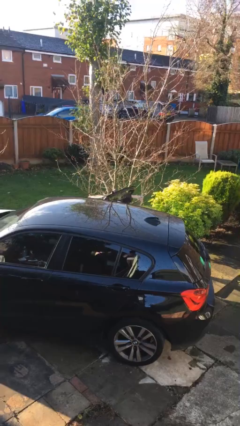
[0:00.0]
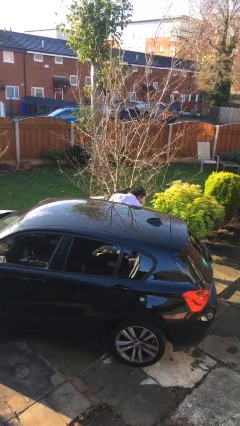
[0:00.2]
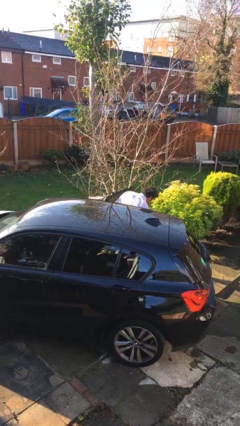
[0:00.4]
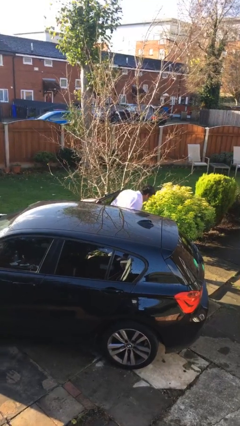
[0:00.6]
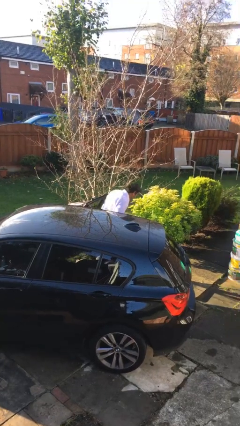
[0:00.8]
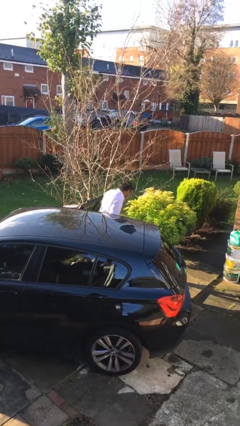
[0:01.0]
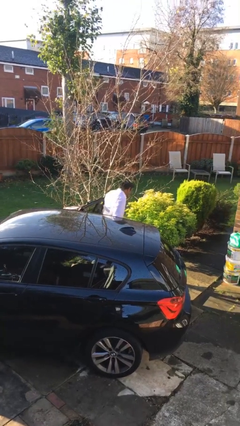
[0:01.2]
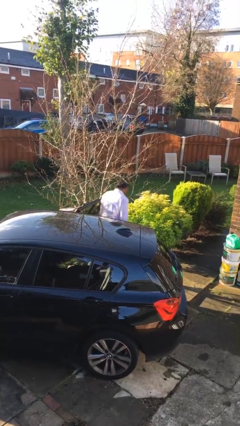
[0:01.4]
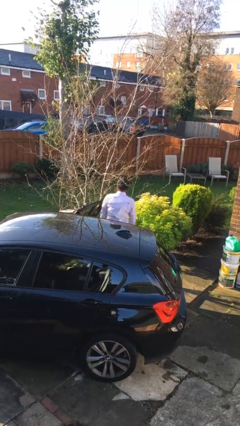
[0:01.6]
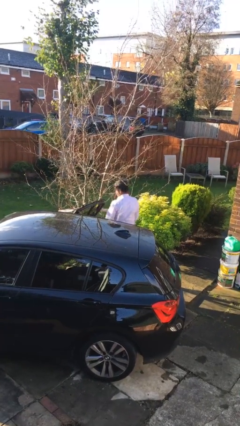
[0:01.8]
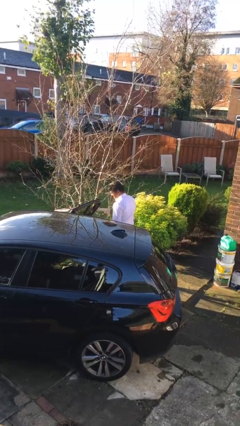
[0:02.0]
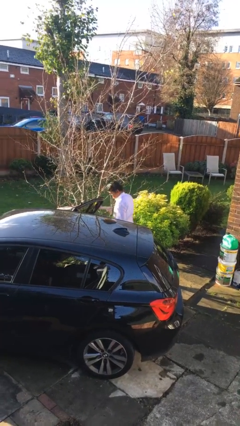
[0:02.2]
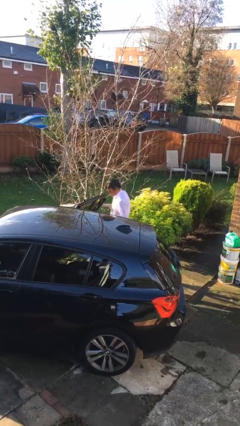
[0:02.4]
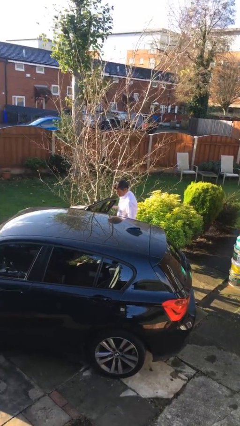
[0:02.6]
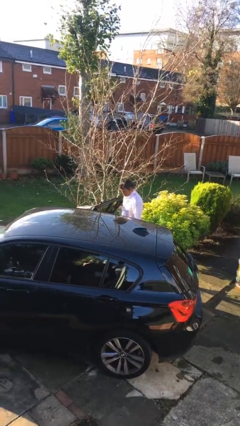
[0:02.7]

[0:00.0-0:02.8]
person exits car

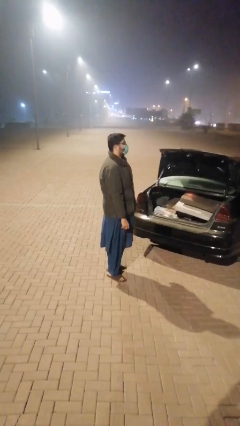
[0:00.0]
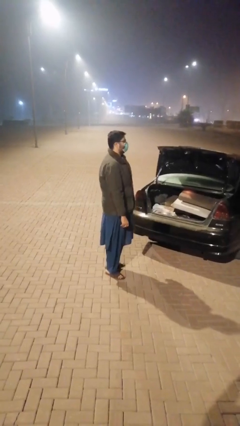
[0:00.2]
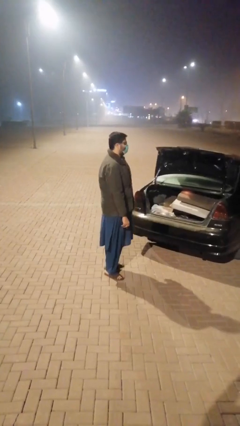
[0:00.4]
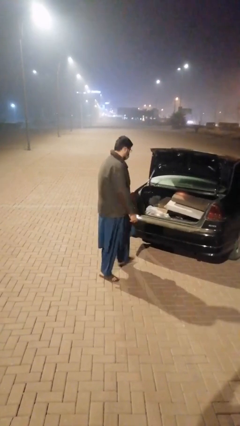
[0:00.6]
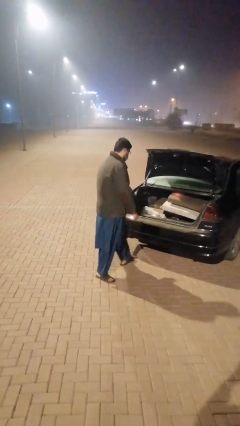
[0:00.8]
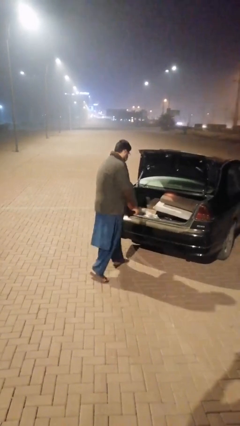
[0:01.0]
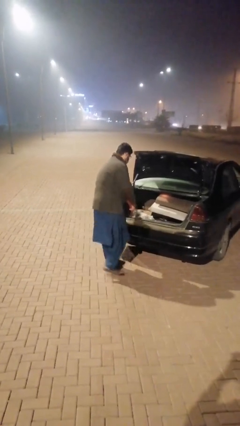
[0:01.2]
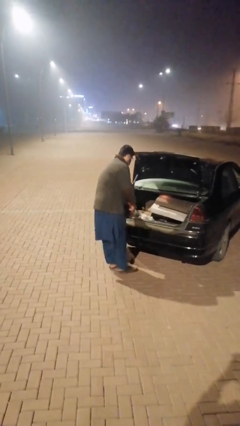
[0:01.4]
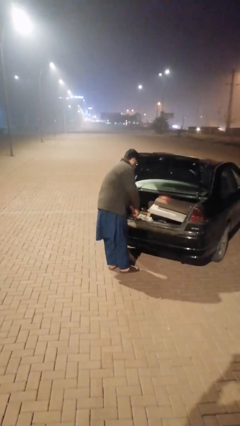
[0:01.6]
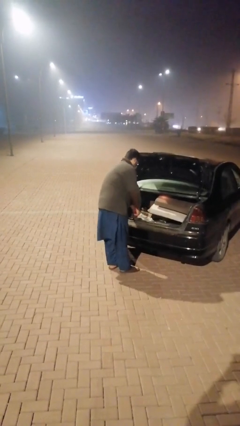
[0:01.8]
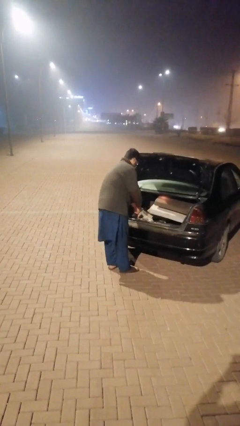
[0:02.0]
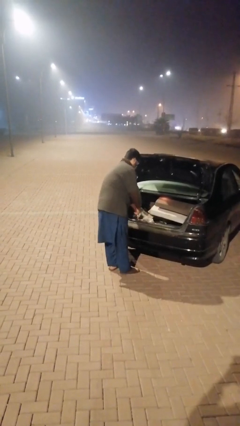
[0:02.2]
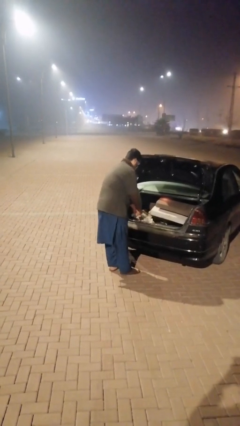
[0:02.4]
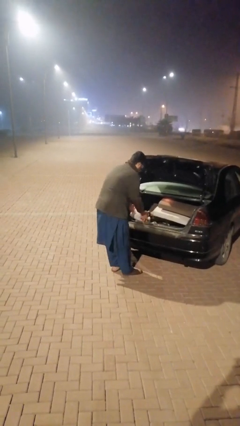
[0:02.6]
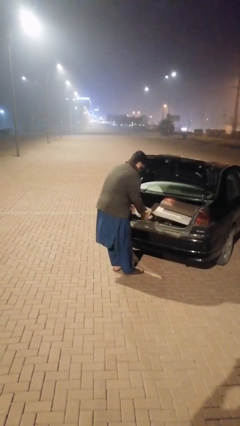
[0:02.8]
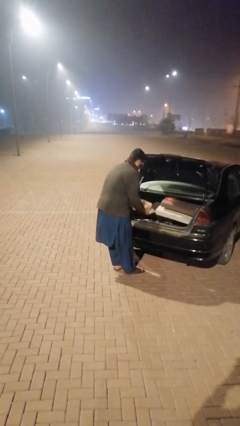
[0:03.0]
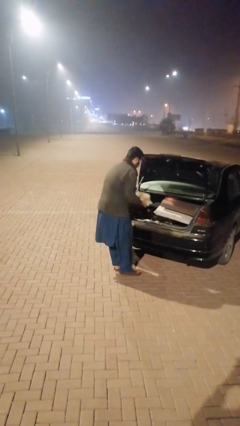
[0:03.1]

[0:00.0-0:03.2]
person loads car

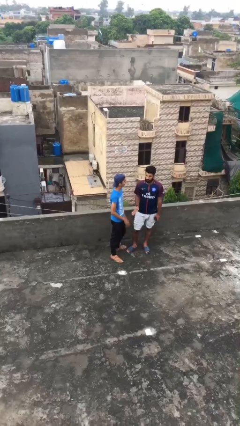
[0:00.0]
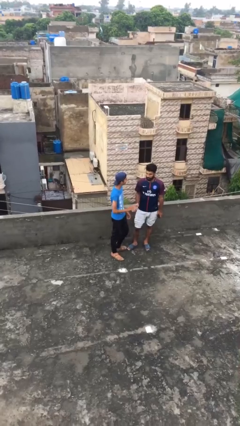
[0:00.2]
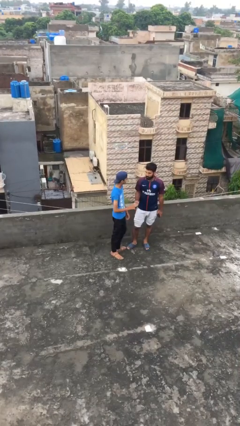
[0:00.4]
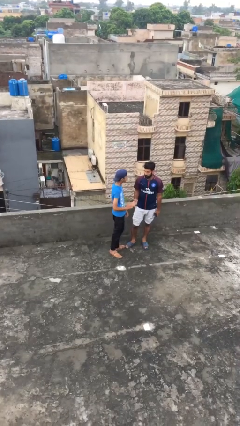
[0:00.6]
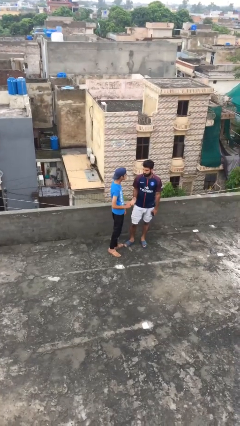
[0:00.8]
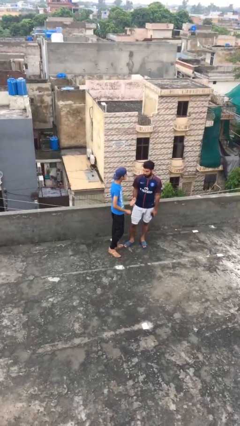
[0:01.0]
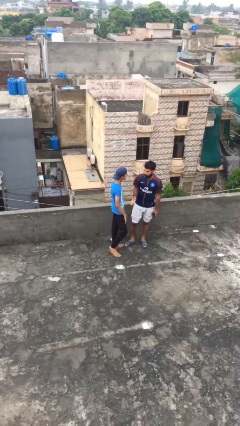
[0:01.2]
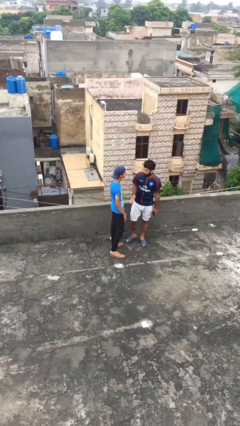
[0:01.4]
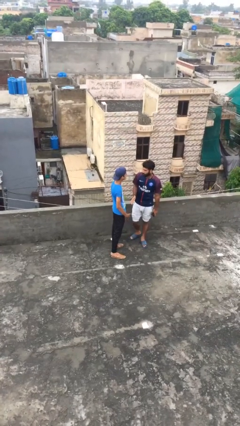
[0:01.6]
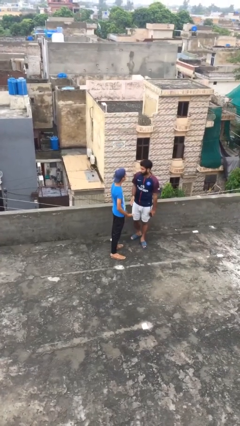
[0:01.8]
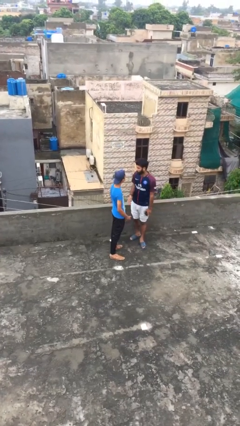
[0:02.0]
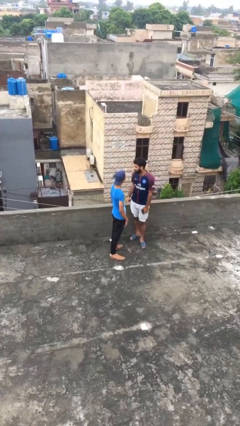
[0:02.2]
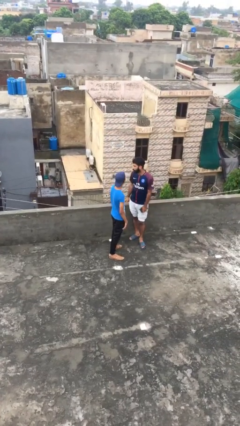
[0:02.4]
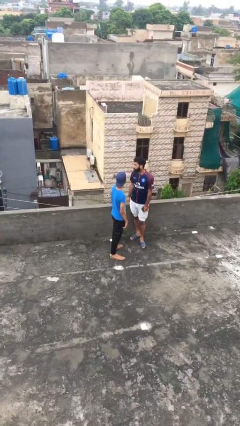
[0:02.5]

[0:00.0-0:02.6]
person talks to person

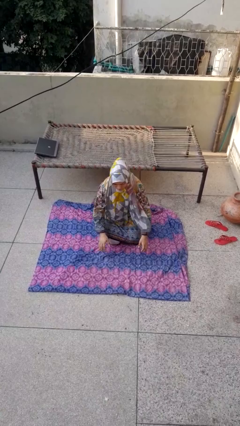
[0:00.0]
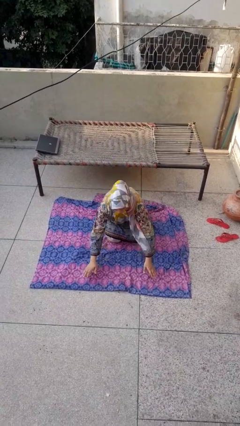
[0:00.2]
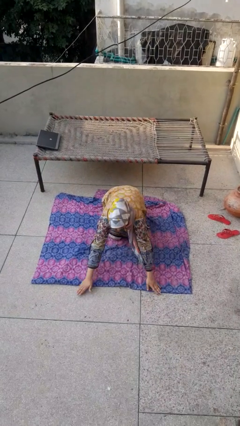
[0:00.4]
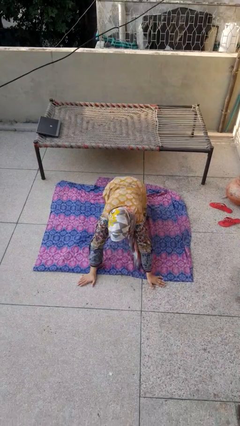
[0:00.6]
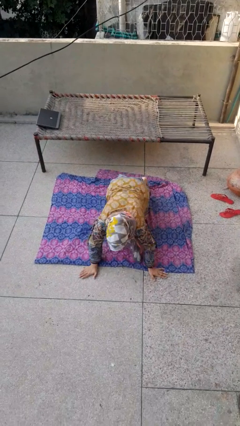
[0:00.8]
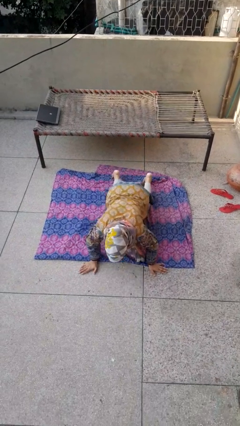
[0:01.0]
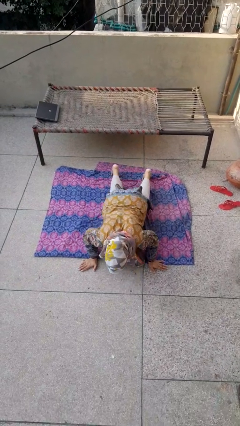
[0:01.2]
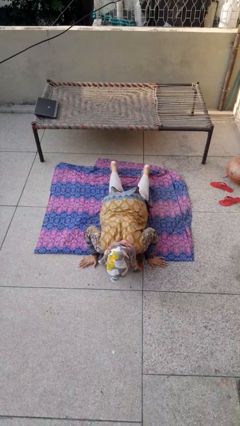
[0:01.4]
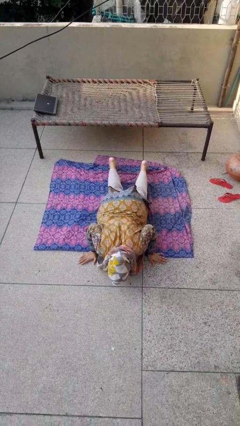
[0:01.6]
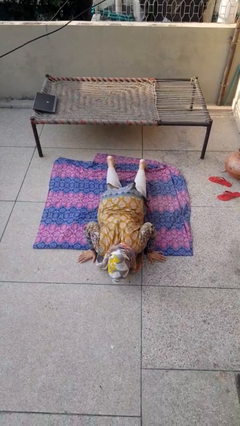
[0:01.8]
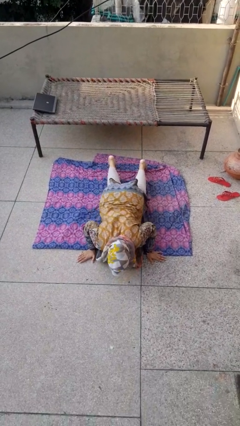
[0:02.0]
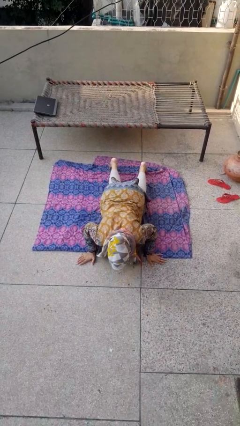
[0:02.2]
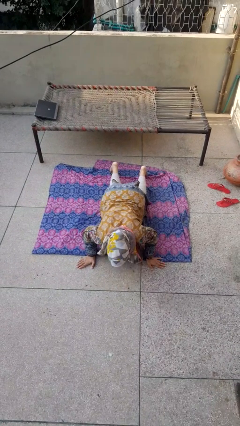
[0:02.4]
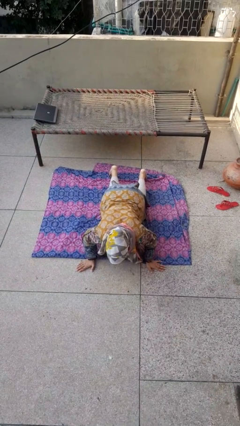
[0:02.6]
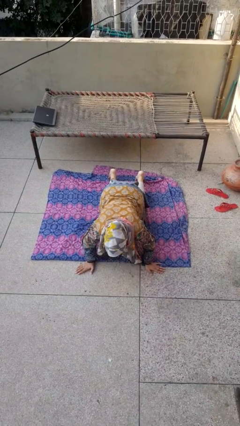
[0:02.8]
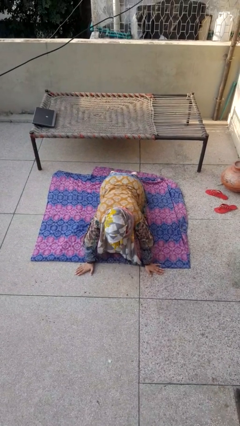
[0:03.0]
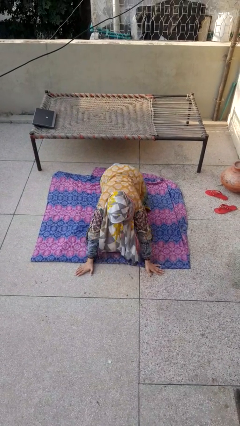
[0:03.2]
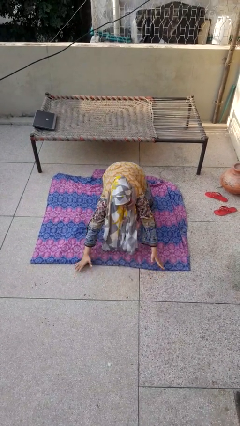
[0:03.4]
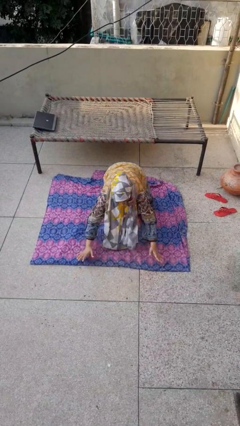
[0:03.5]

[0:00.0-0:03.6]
person exercises with pushup

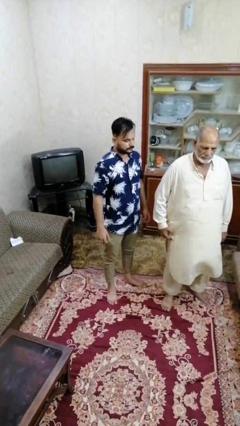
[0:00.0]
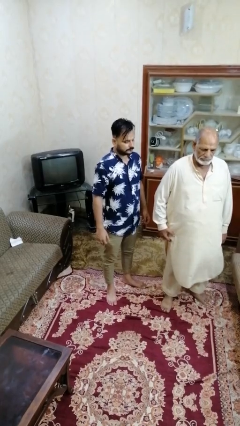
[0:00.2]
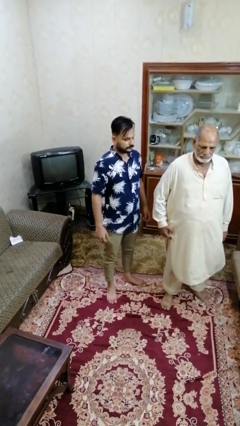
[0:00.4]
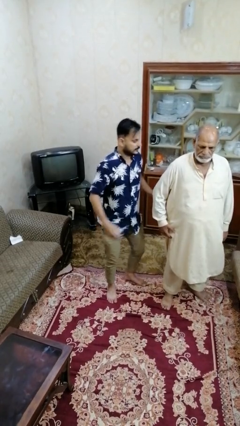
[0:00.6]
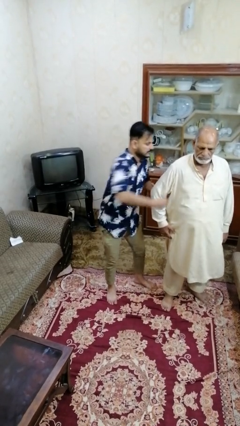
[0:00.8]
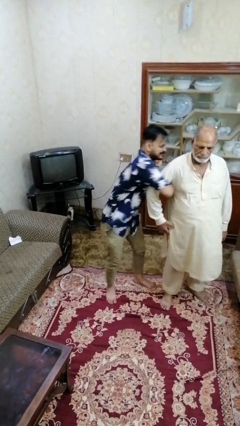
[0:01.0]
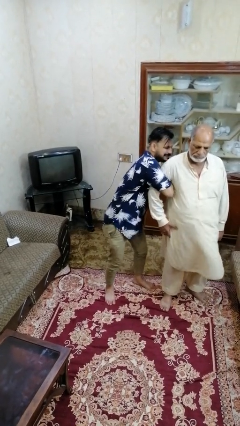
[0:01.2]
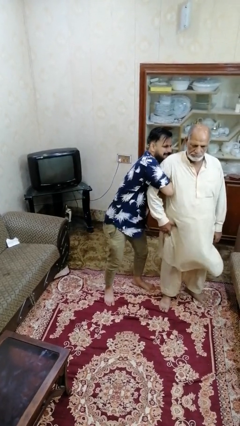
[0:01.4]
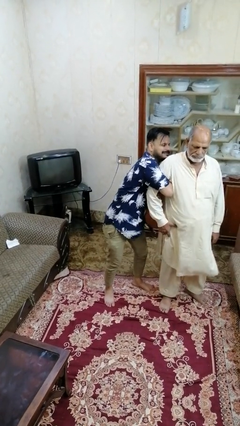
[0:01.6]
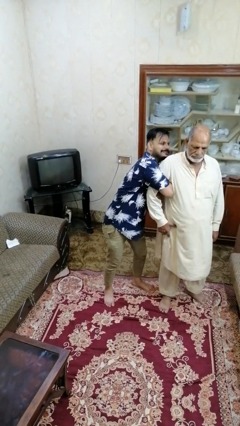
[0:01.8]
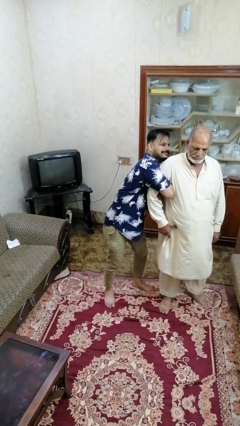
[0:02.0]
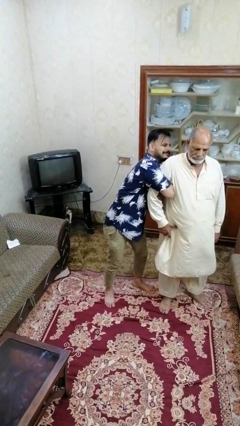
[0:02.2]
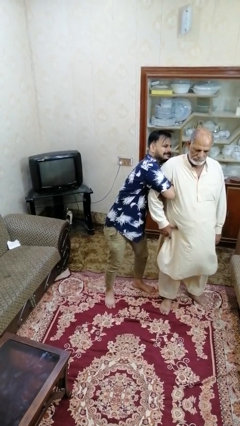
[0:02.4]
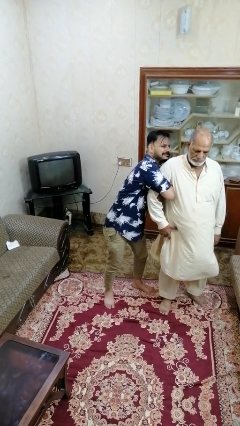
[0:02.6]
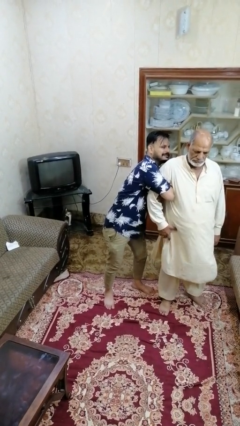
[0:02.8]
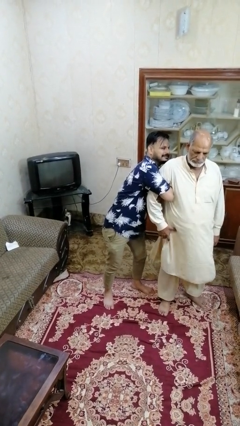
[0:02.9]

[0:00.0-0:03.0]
person grabs person by bicep

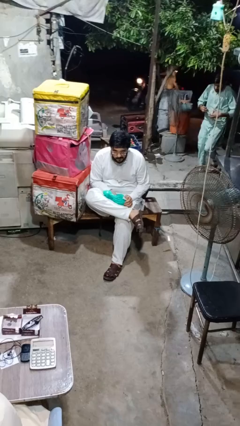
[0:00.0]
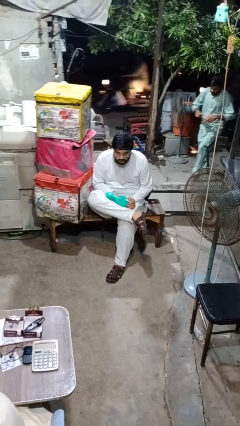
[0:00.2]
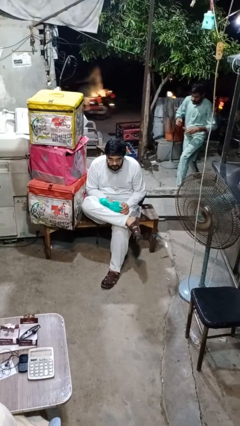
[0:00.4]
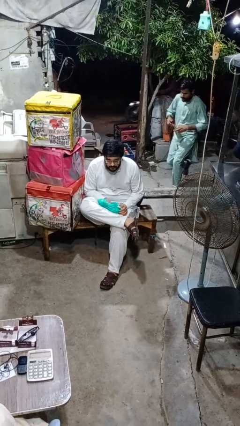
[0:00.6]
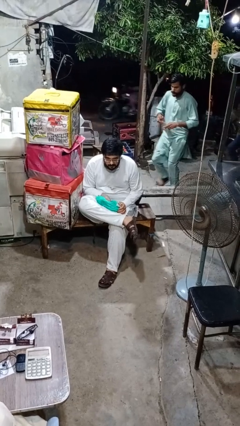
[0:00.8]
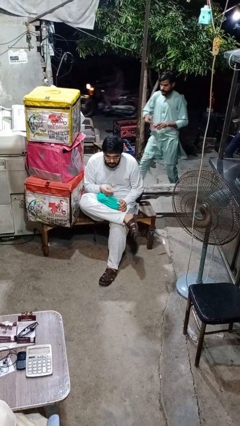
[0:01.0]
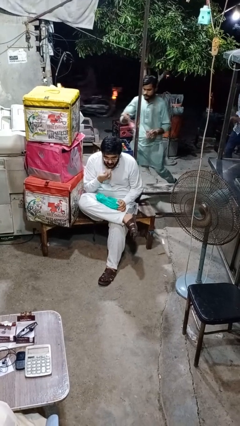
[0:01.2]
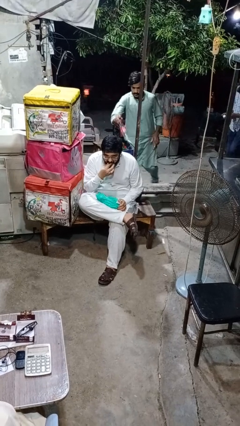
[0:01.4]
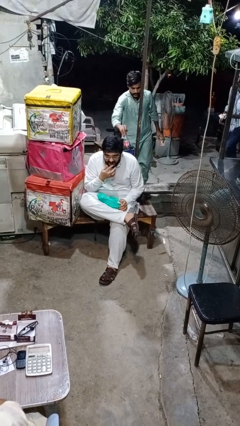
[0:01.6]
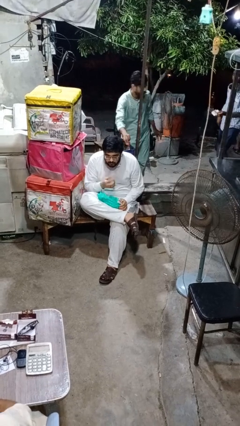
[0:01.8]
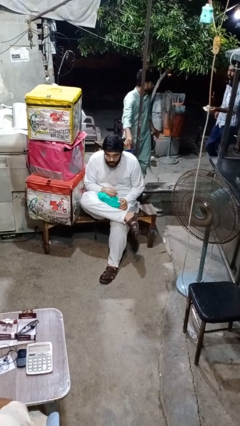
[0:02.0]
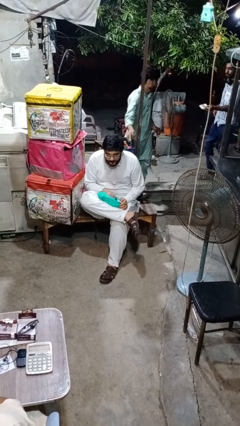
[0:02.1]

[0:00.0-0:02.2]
person eats snack from bag
